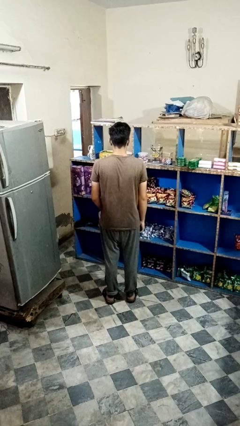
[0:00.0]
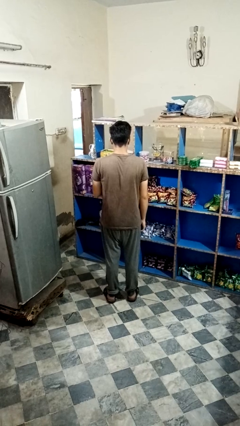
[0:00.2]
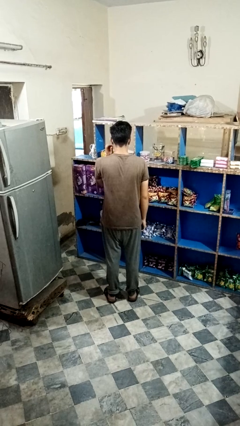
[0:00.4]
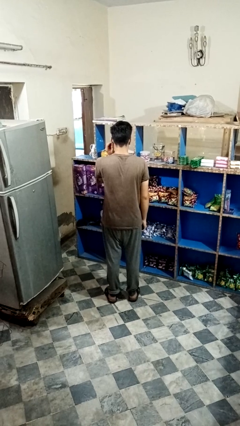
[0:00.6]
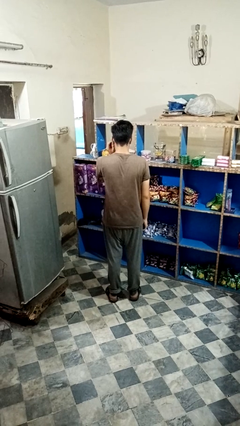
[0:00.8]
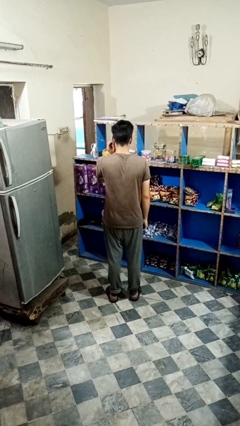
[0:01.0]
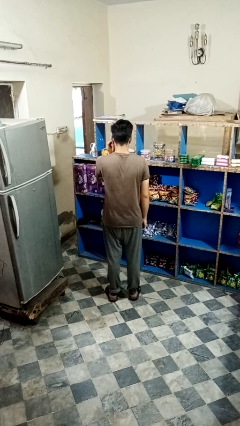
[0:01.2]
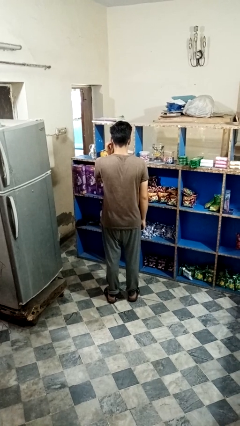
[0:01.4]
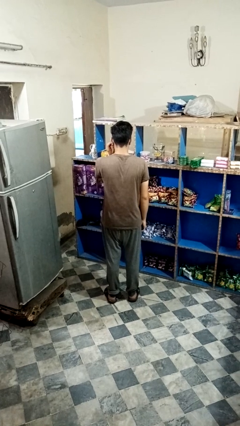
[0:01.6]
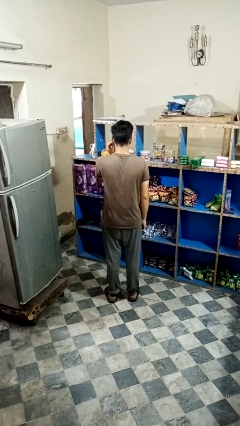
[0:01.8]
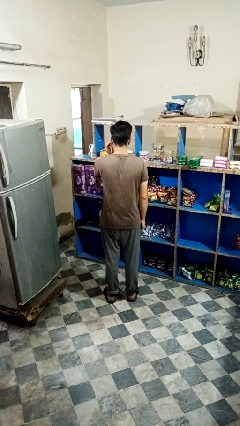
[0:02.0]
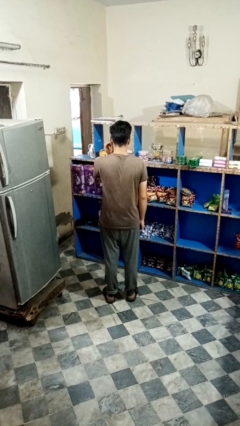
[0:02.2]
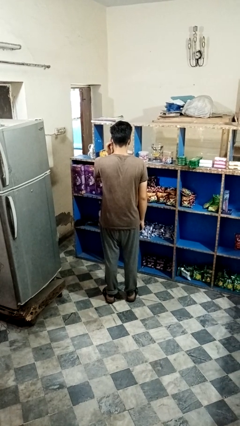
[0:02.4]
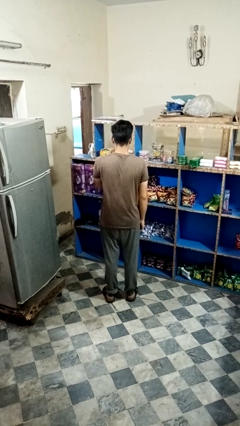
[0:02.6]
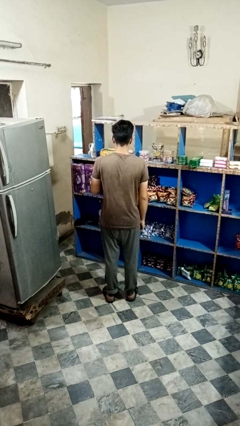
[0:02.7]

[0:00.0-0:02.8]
person touches earlobe

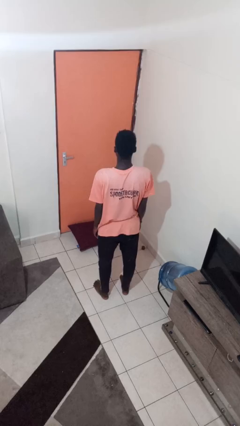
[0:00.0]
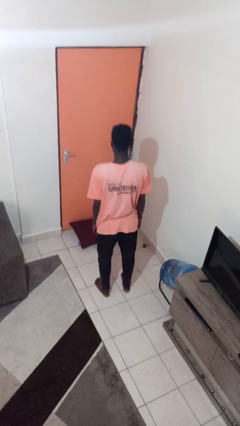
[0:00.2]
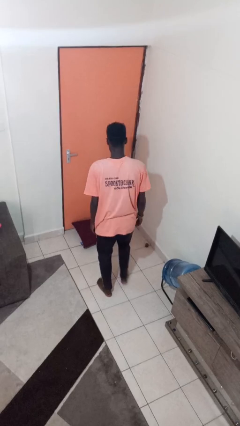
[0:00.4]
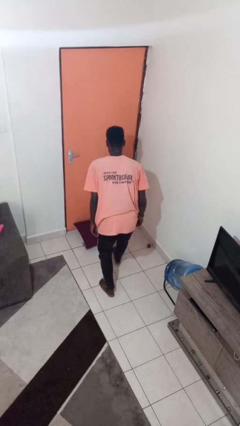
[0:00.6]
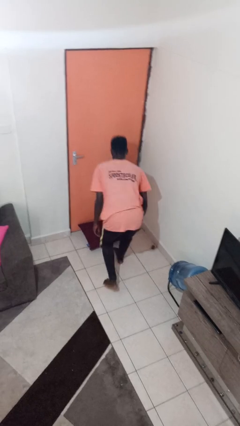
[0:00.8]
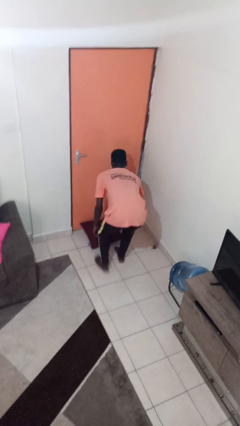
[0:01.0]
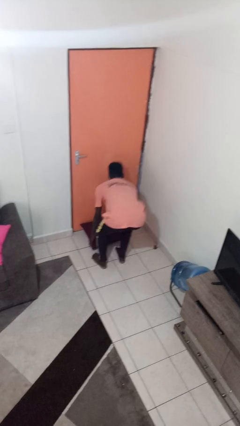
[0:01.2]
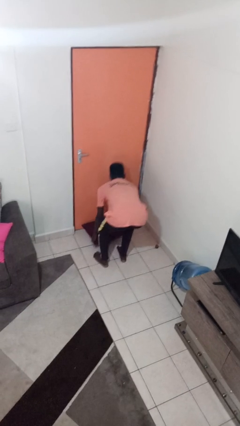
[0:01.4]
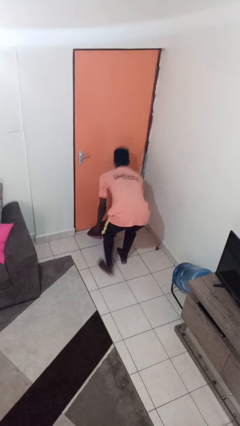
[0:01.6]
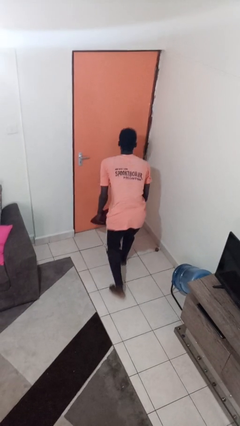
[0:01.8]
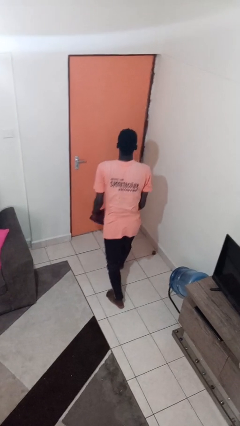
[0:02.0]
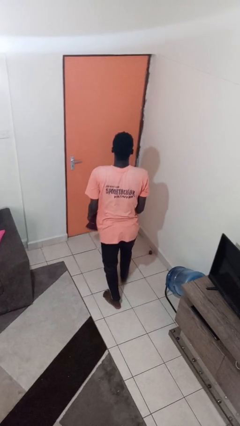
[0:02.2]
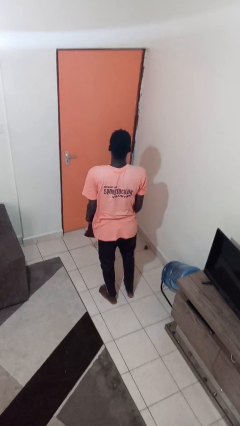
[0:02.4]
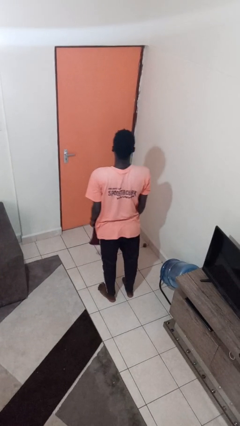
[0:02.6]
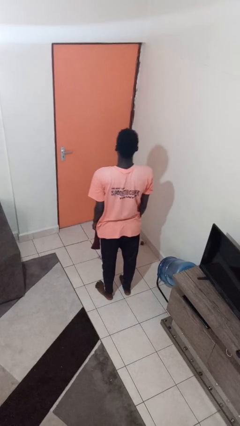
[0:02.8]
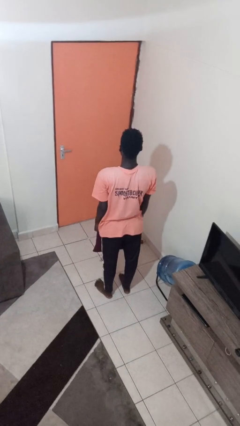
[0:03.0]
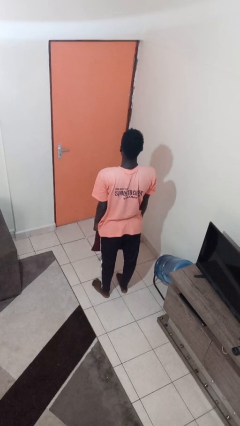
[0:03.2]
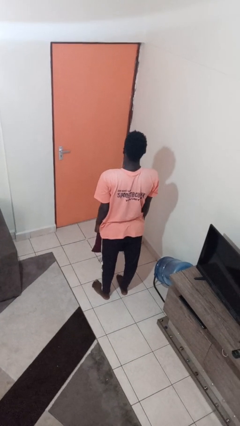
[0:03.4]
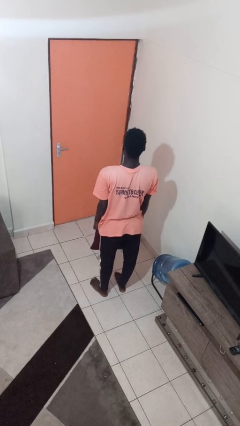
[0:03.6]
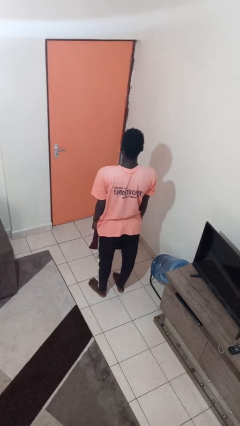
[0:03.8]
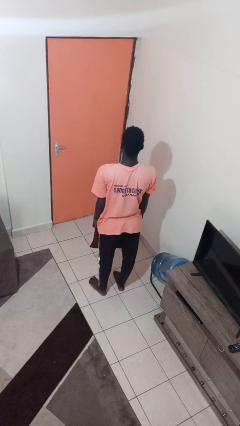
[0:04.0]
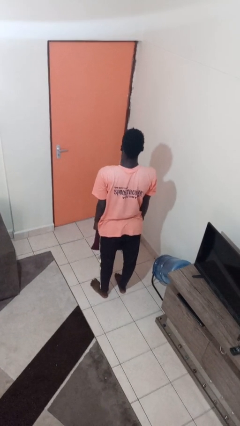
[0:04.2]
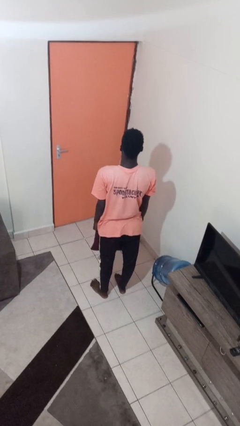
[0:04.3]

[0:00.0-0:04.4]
person picks up object from floor

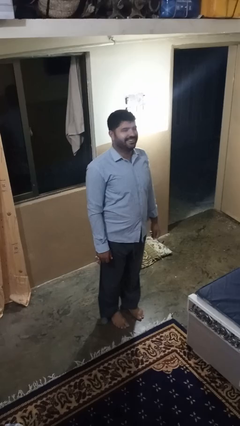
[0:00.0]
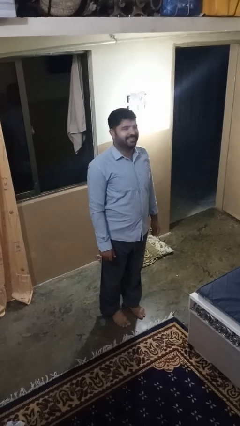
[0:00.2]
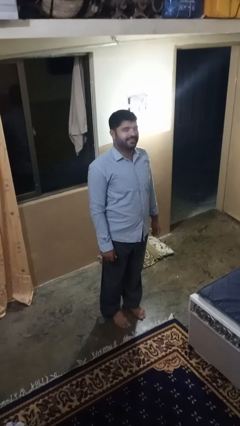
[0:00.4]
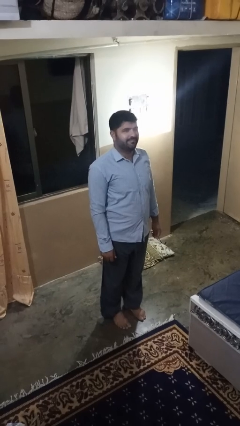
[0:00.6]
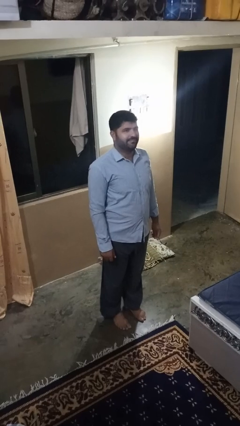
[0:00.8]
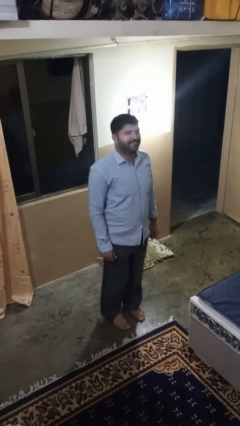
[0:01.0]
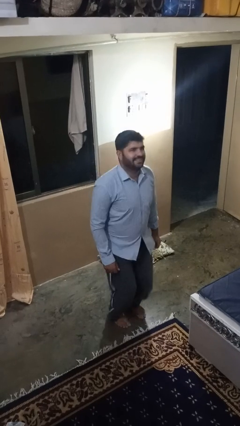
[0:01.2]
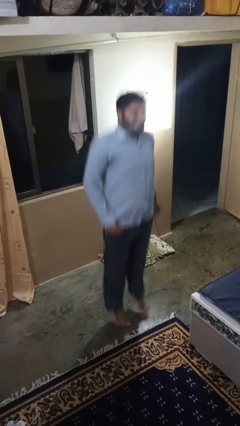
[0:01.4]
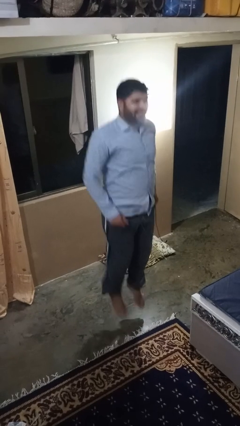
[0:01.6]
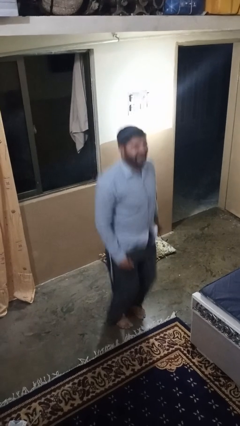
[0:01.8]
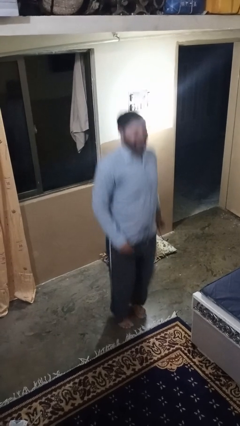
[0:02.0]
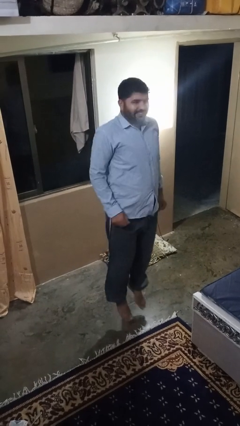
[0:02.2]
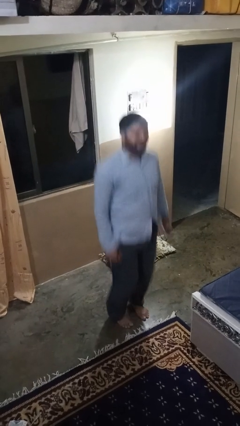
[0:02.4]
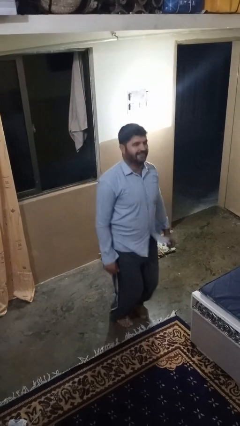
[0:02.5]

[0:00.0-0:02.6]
person jumps

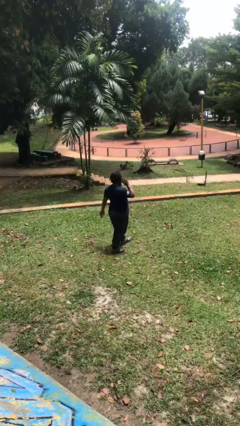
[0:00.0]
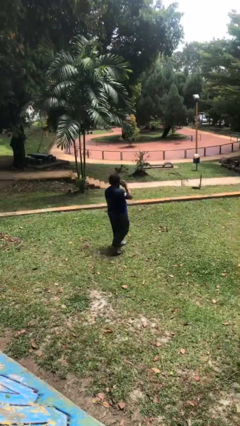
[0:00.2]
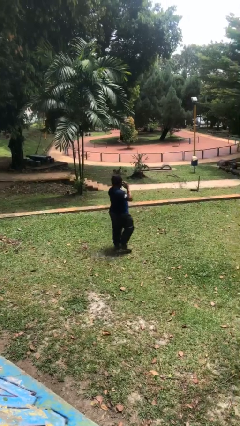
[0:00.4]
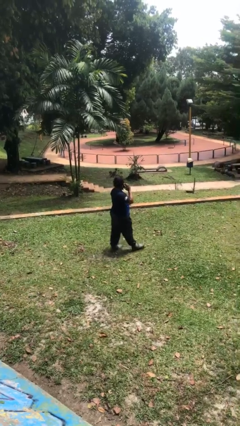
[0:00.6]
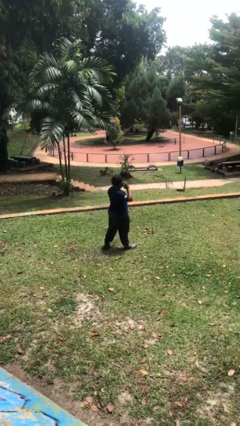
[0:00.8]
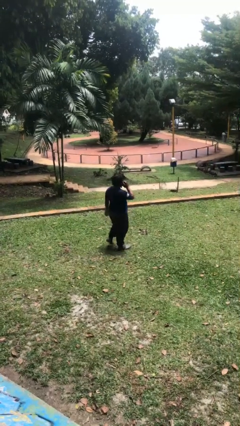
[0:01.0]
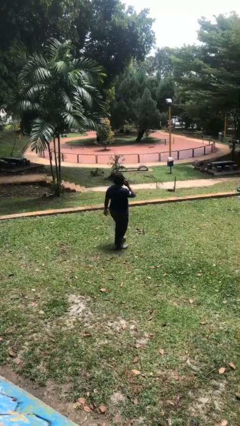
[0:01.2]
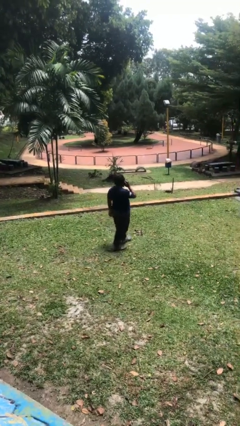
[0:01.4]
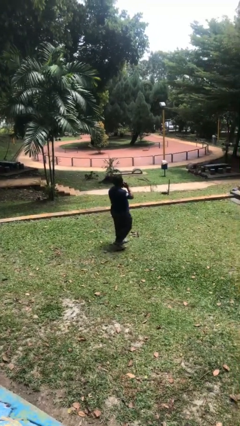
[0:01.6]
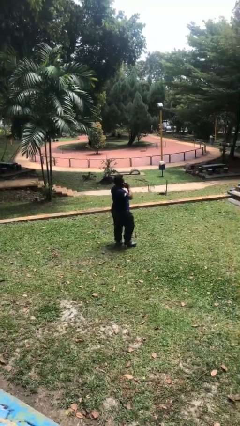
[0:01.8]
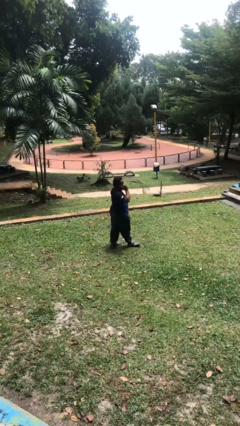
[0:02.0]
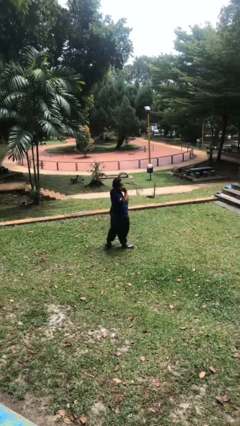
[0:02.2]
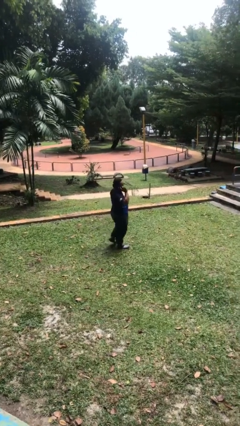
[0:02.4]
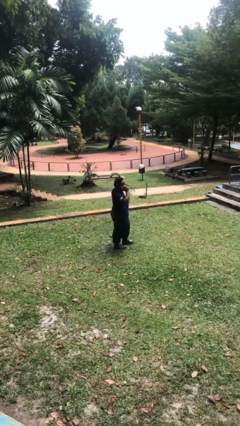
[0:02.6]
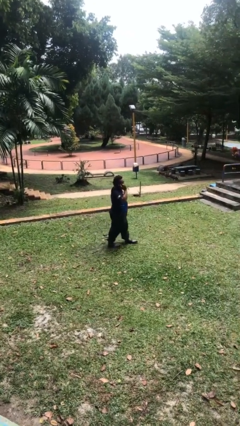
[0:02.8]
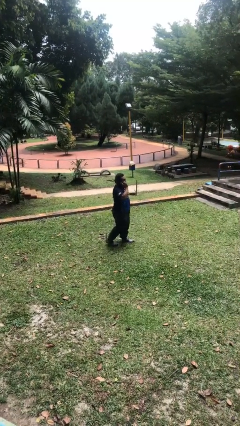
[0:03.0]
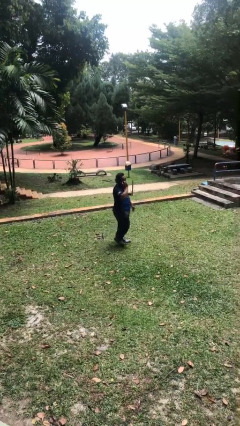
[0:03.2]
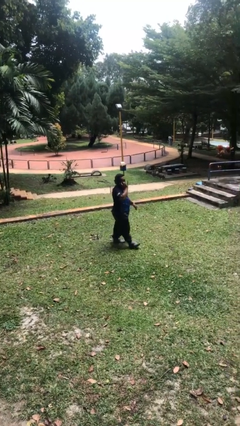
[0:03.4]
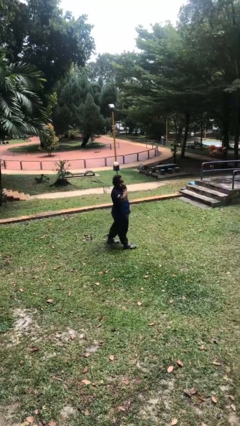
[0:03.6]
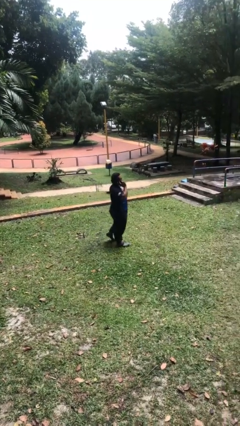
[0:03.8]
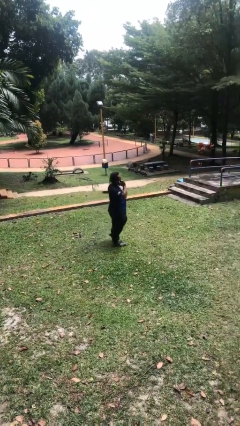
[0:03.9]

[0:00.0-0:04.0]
person talks on phone

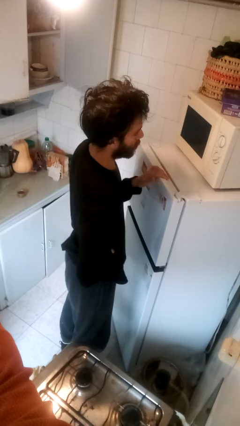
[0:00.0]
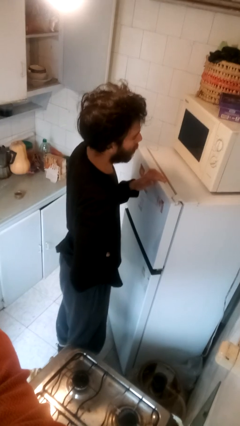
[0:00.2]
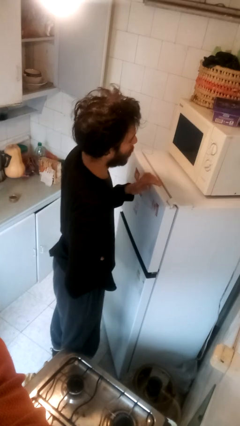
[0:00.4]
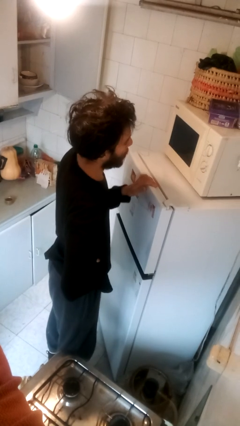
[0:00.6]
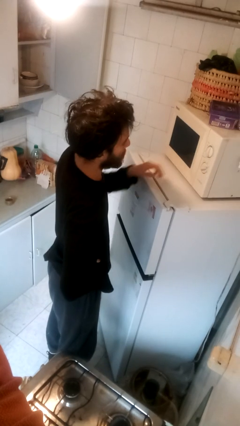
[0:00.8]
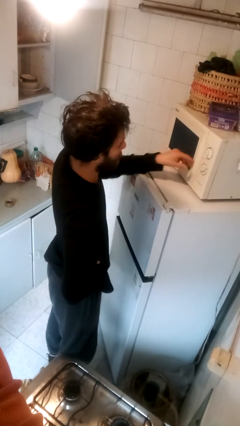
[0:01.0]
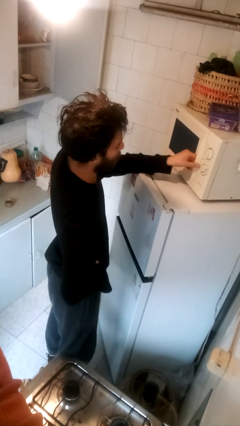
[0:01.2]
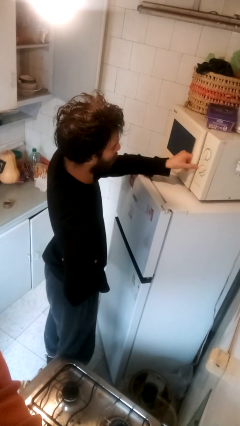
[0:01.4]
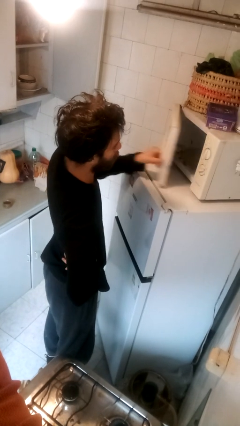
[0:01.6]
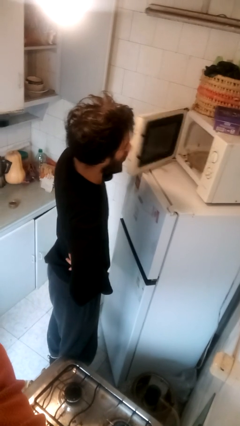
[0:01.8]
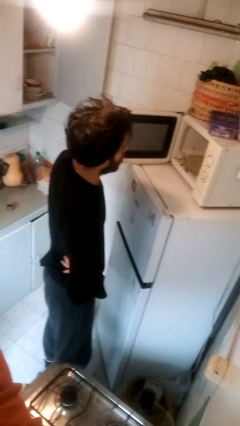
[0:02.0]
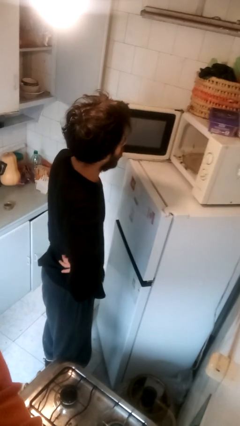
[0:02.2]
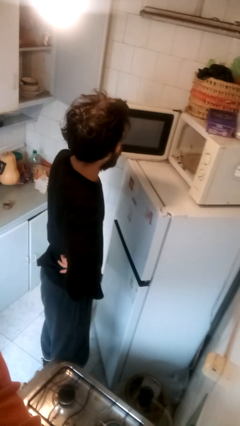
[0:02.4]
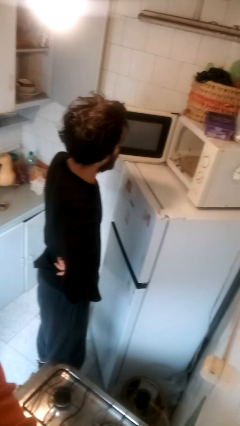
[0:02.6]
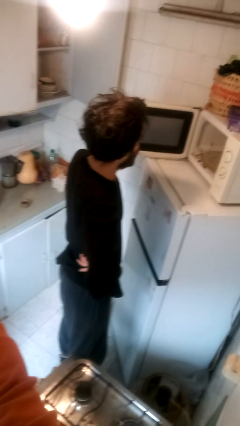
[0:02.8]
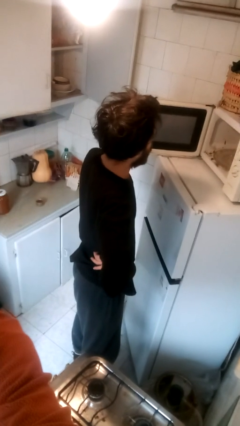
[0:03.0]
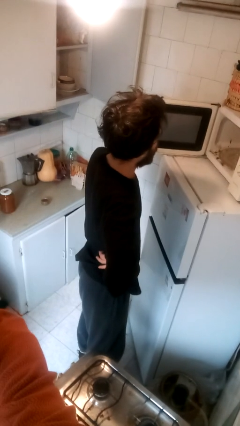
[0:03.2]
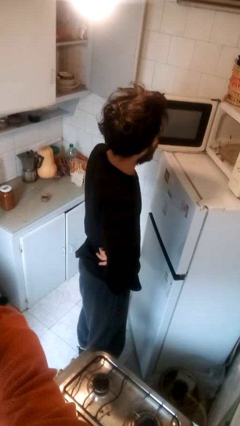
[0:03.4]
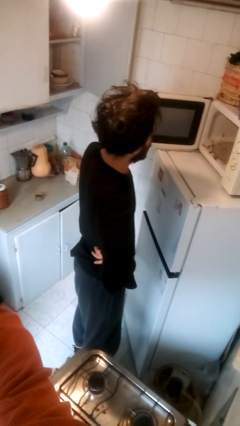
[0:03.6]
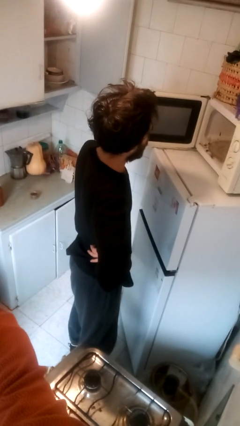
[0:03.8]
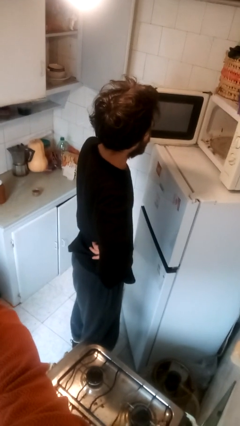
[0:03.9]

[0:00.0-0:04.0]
person opens microwave
